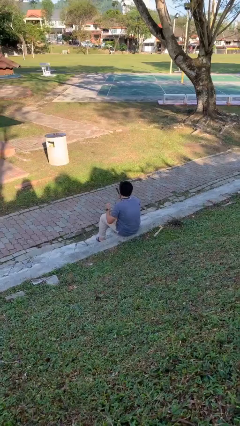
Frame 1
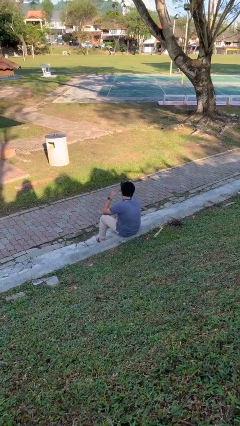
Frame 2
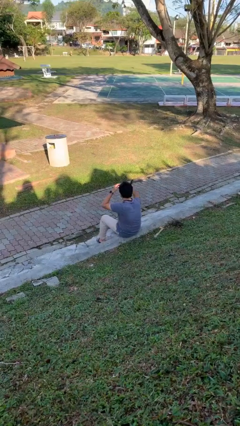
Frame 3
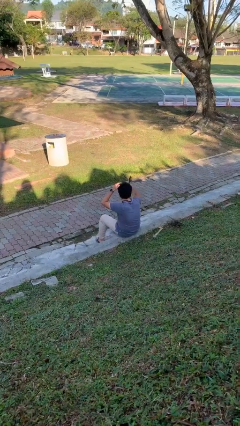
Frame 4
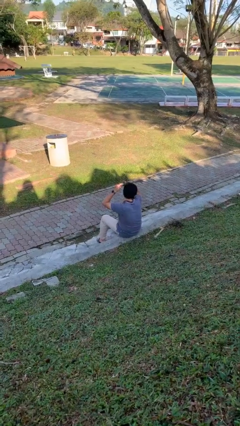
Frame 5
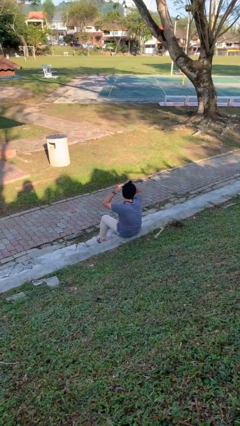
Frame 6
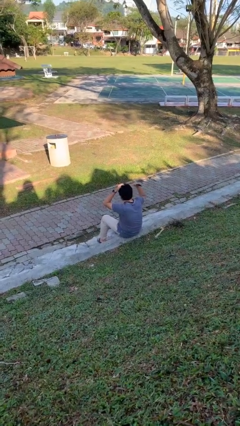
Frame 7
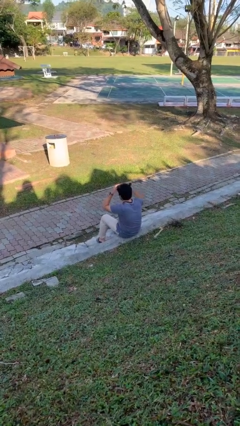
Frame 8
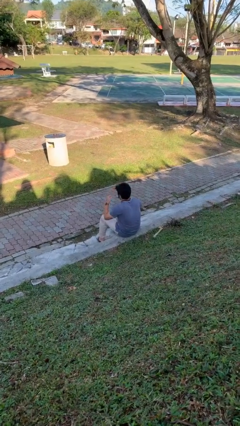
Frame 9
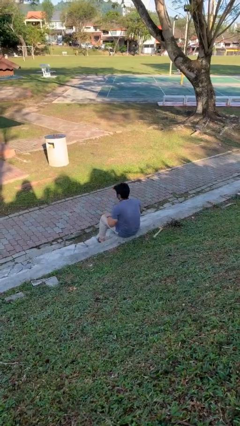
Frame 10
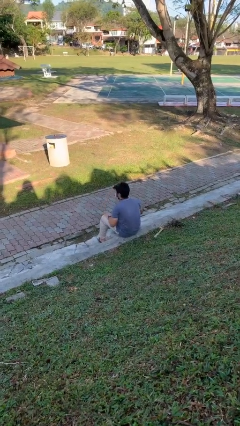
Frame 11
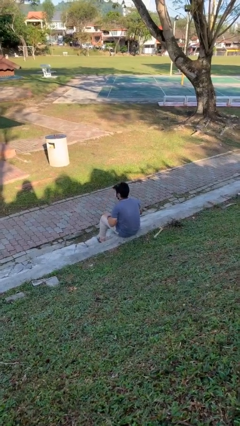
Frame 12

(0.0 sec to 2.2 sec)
person brushes hair

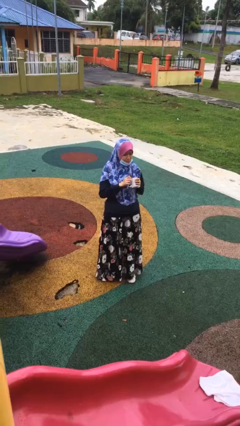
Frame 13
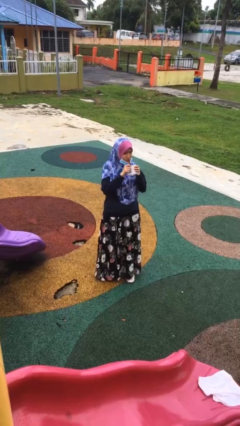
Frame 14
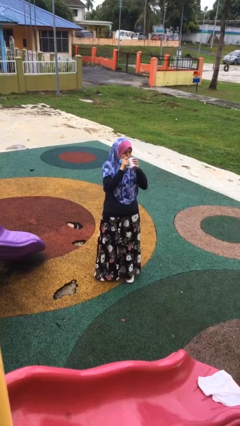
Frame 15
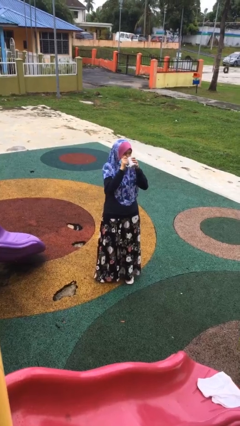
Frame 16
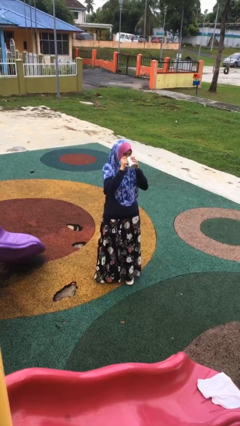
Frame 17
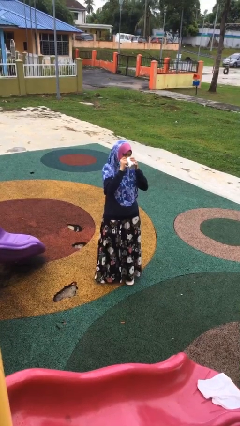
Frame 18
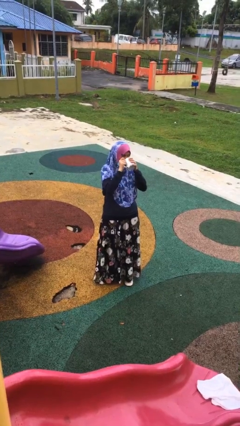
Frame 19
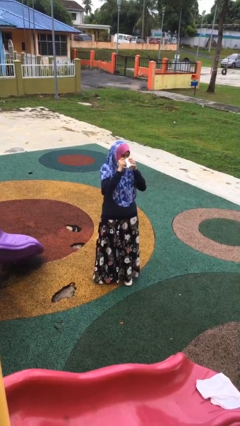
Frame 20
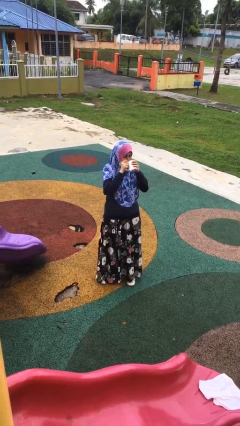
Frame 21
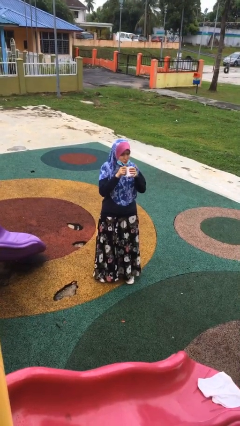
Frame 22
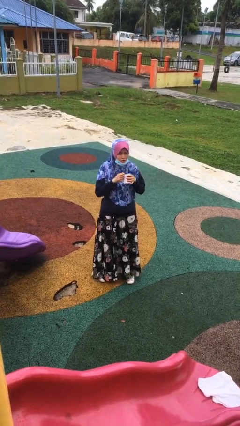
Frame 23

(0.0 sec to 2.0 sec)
person drinks from mug

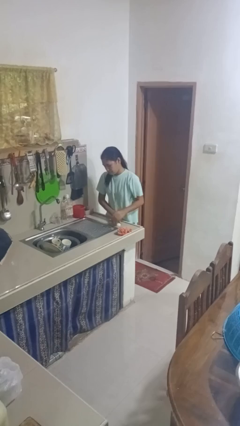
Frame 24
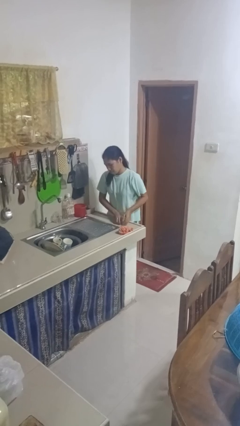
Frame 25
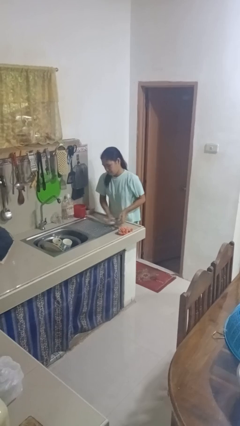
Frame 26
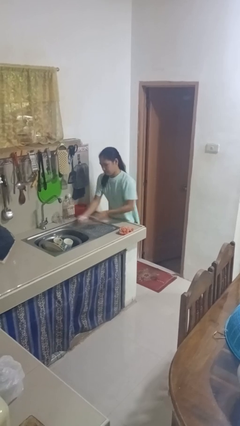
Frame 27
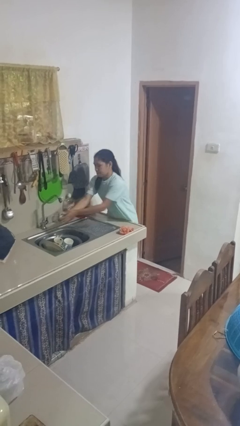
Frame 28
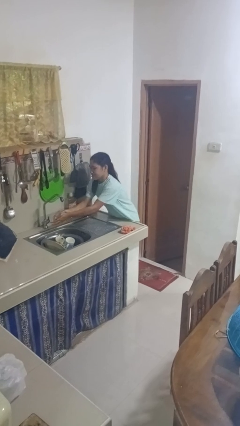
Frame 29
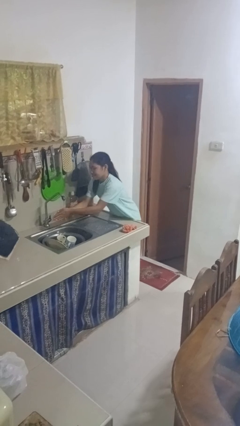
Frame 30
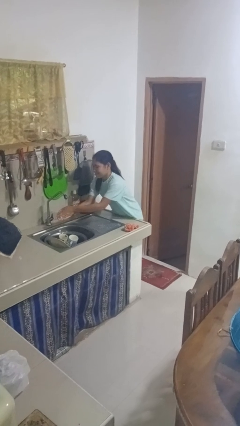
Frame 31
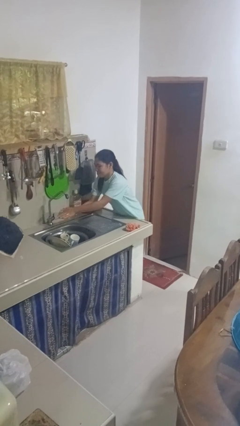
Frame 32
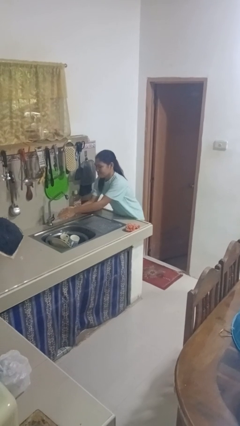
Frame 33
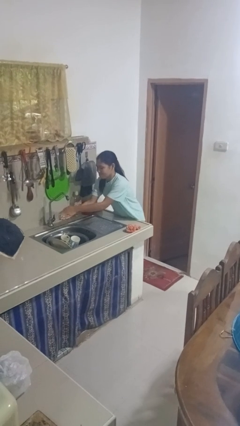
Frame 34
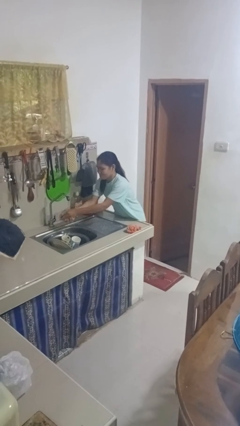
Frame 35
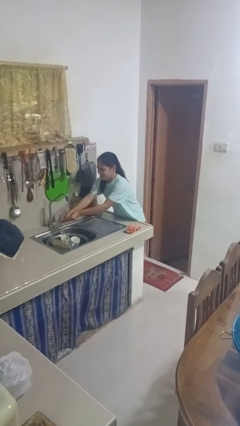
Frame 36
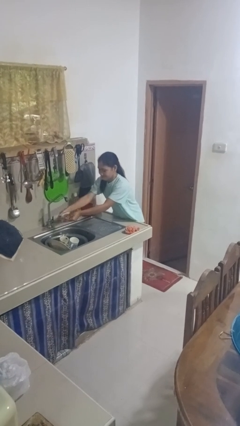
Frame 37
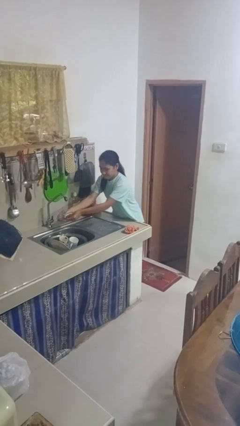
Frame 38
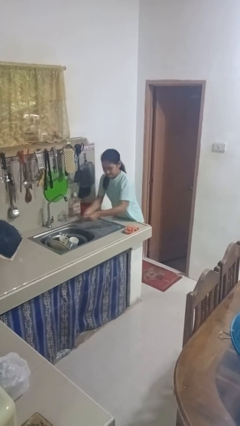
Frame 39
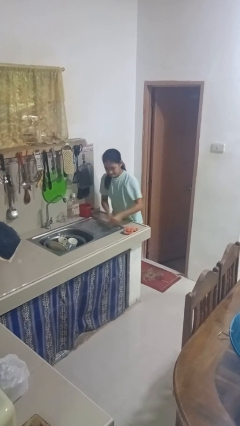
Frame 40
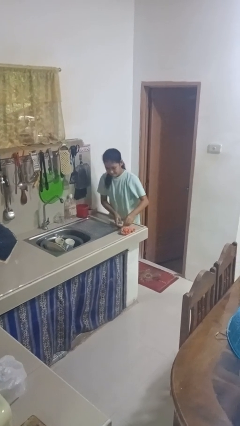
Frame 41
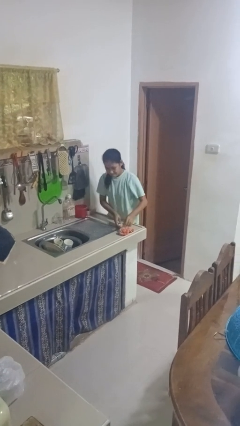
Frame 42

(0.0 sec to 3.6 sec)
person washes hands

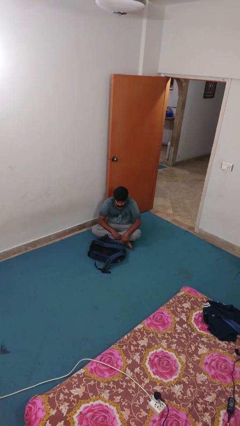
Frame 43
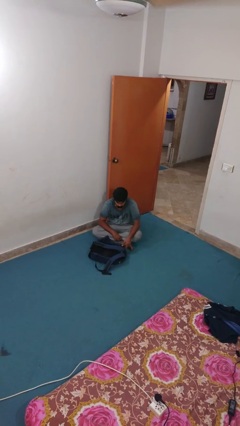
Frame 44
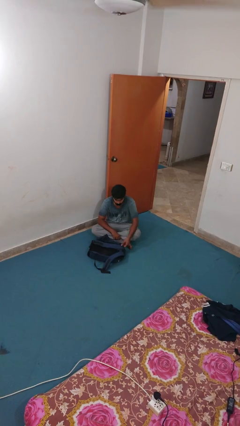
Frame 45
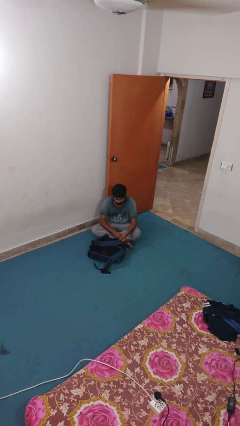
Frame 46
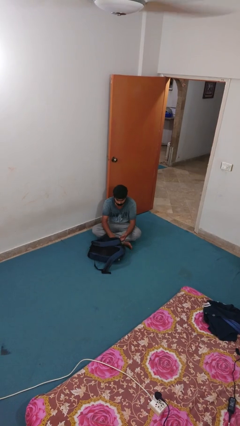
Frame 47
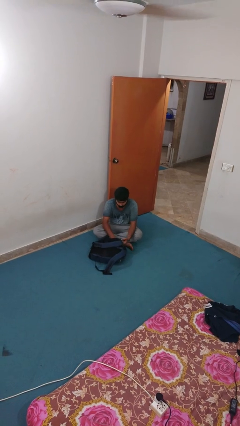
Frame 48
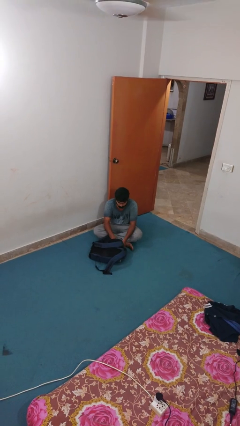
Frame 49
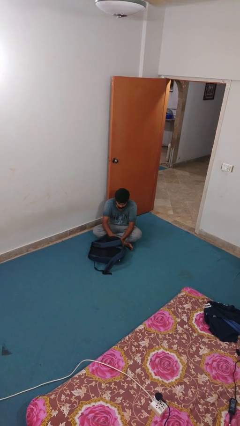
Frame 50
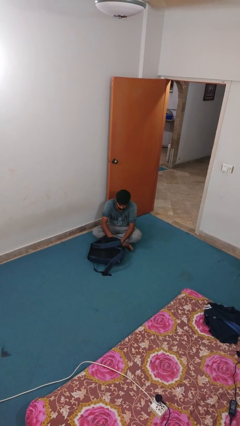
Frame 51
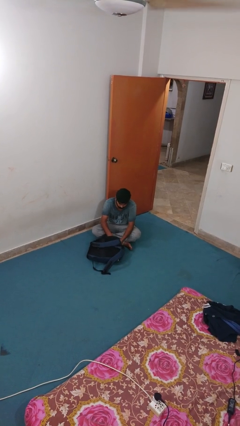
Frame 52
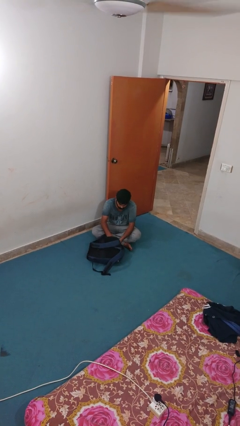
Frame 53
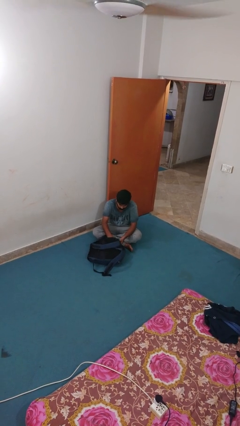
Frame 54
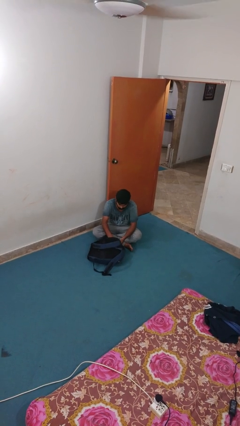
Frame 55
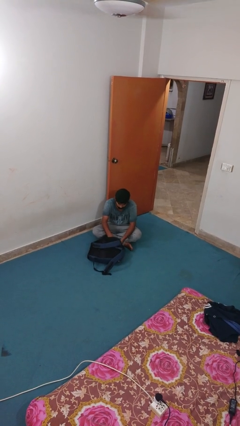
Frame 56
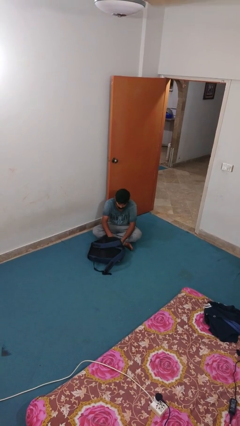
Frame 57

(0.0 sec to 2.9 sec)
person searches in backpack

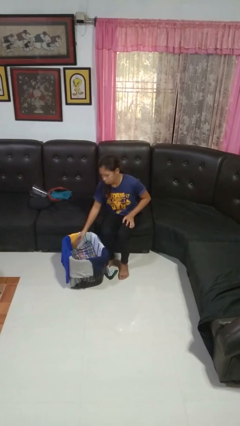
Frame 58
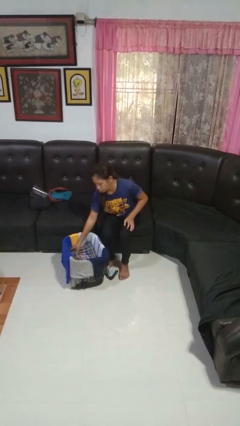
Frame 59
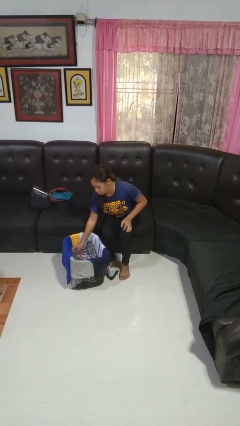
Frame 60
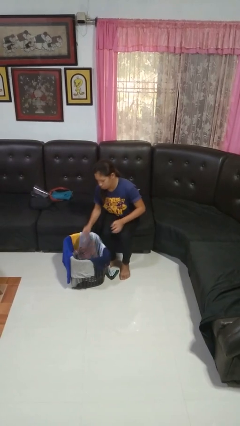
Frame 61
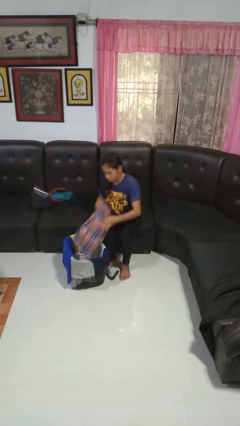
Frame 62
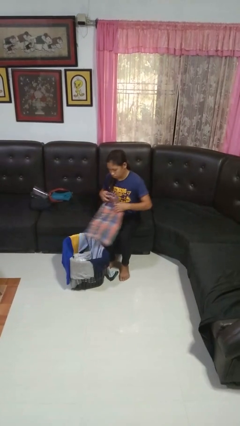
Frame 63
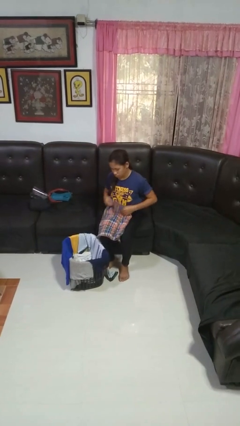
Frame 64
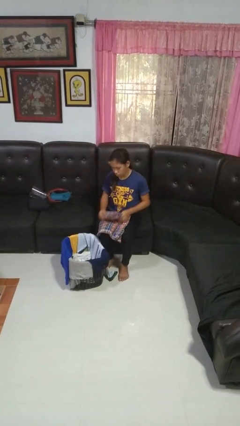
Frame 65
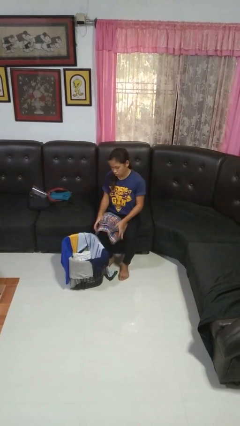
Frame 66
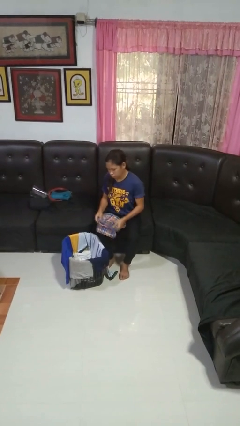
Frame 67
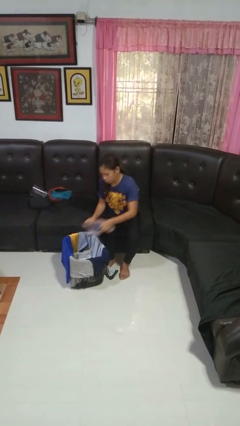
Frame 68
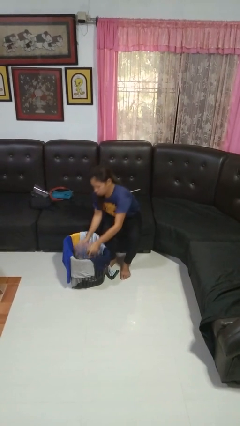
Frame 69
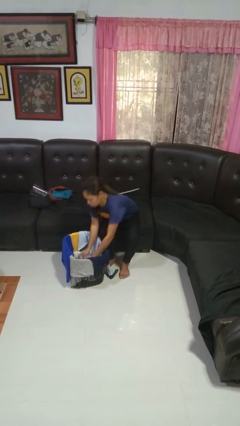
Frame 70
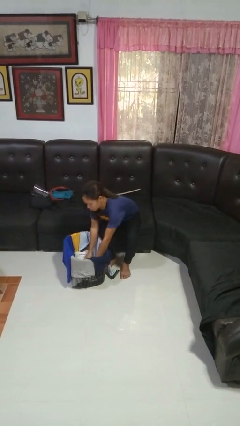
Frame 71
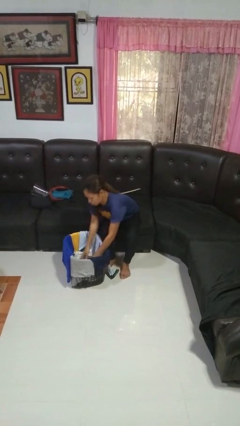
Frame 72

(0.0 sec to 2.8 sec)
person folds pants

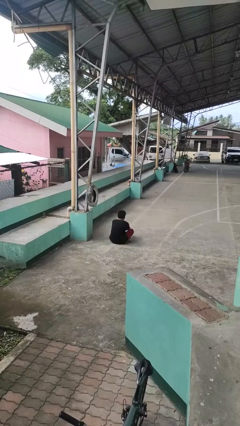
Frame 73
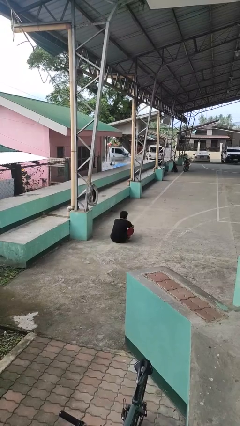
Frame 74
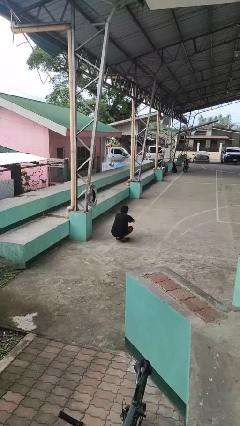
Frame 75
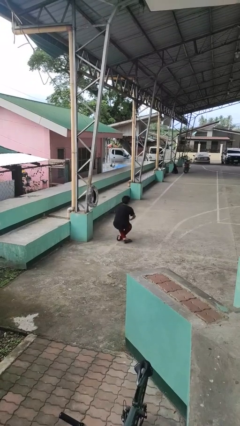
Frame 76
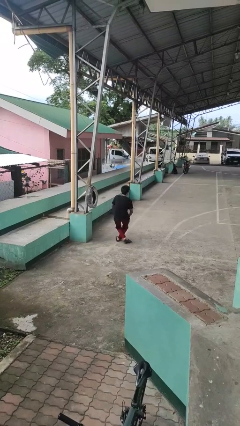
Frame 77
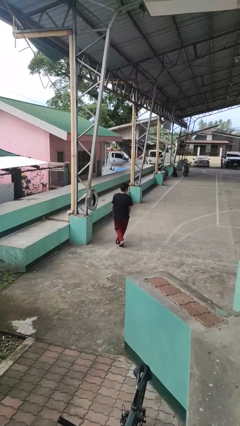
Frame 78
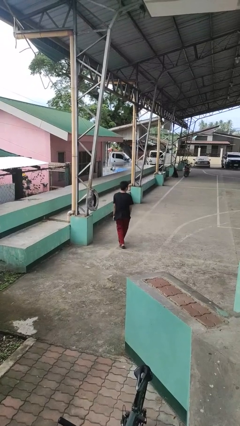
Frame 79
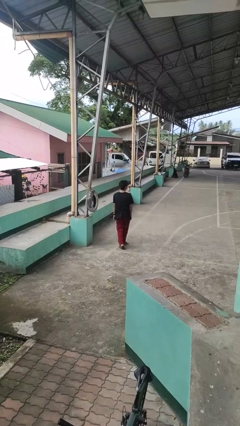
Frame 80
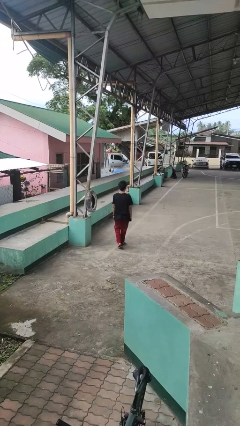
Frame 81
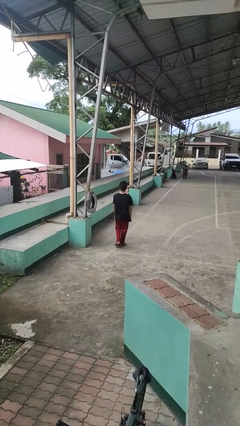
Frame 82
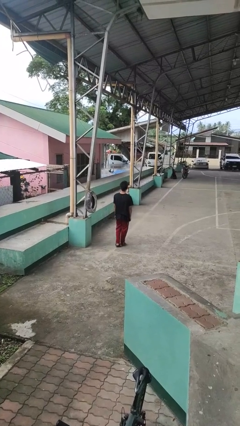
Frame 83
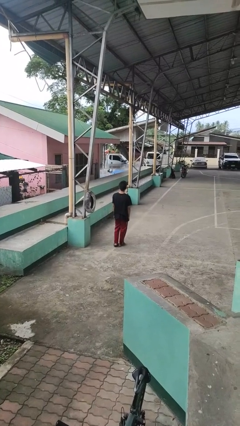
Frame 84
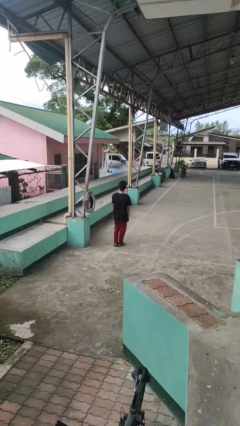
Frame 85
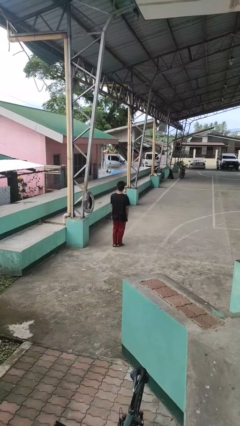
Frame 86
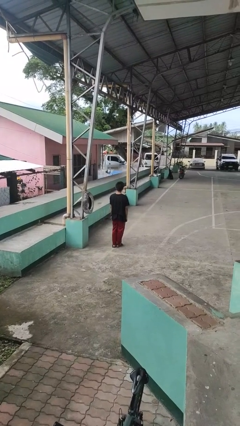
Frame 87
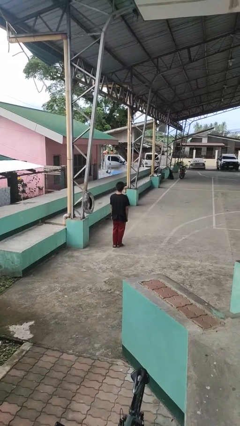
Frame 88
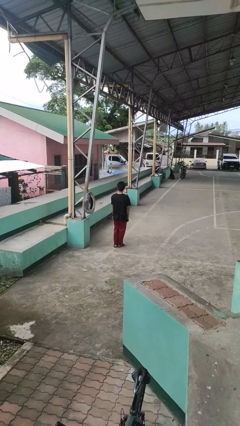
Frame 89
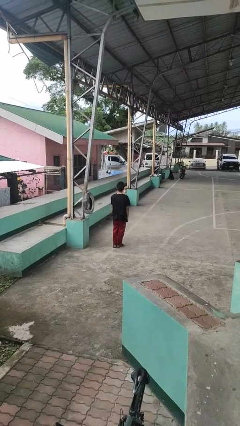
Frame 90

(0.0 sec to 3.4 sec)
person stands up from floor

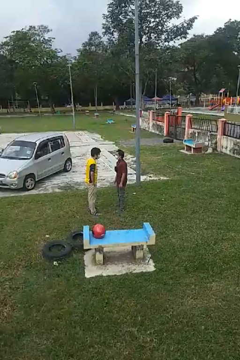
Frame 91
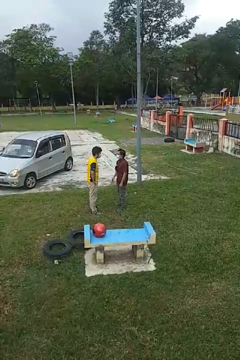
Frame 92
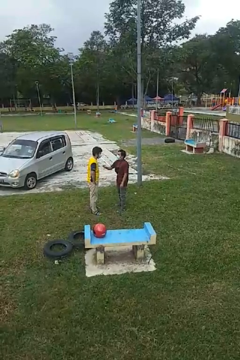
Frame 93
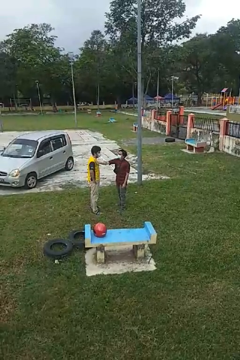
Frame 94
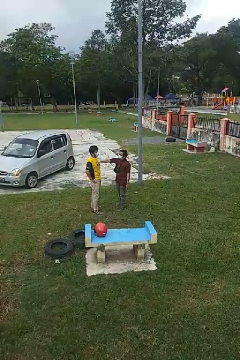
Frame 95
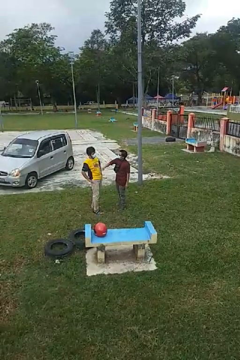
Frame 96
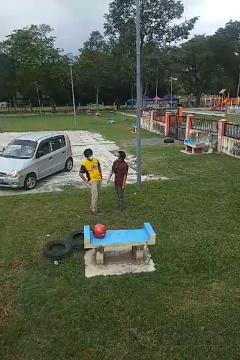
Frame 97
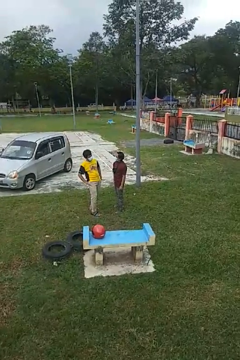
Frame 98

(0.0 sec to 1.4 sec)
person shoves person
